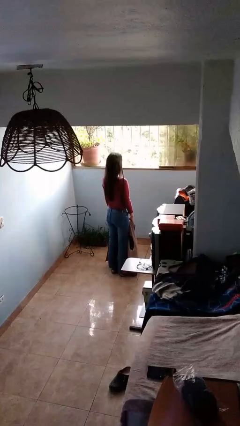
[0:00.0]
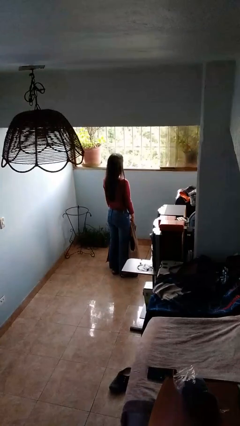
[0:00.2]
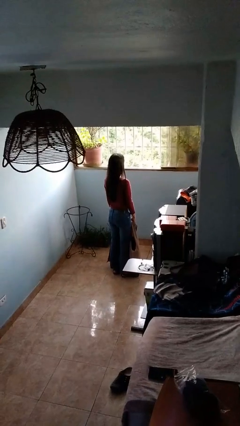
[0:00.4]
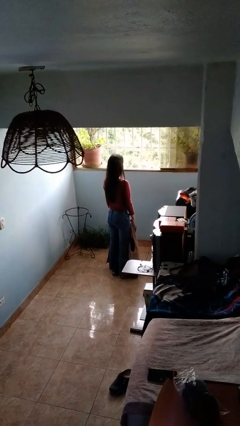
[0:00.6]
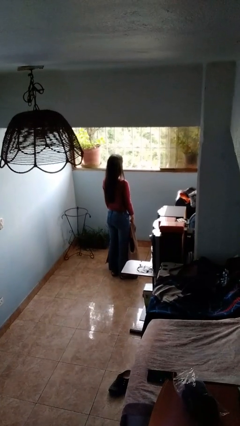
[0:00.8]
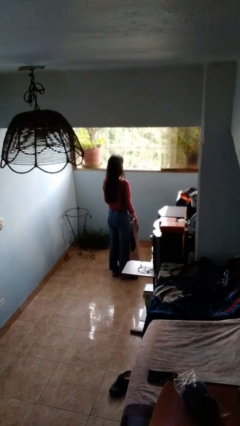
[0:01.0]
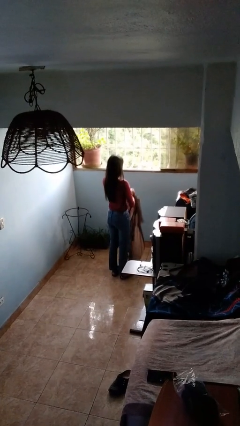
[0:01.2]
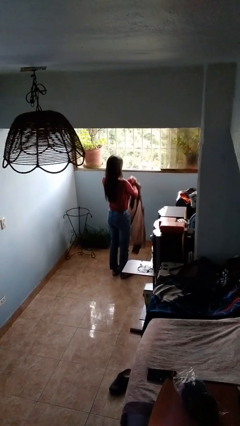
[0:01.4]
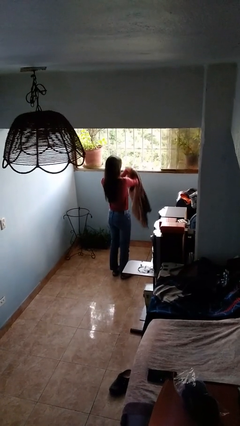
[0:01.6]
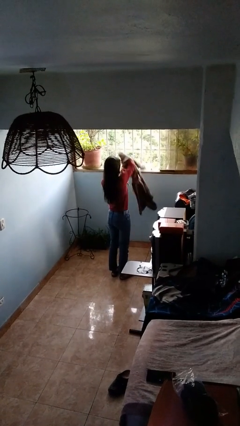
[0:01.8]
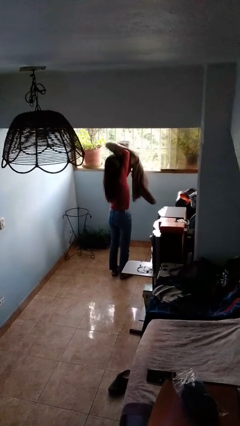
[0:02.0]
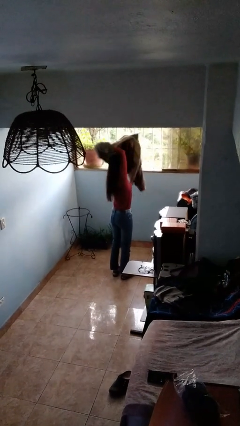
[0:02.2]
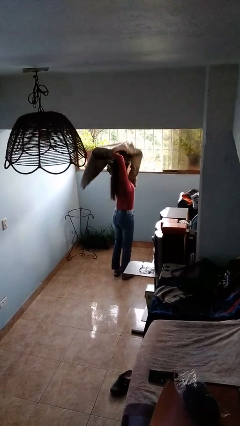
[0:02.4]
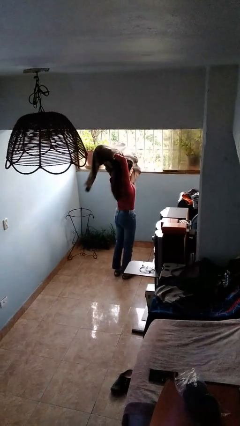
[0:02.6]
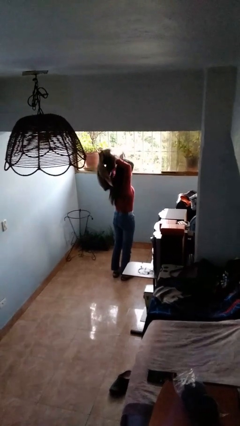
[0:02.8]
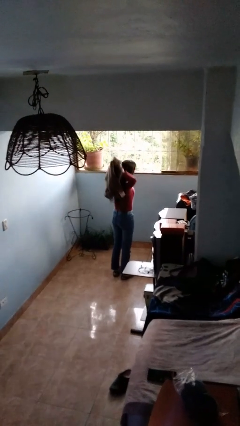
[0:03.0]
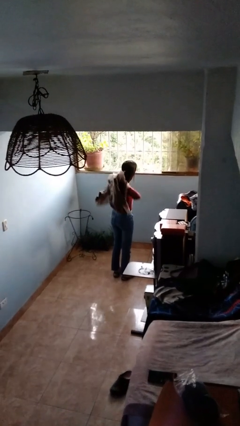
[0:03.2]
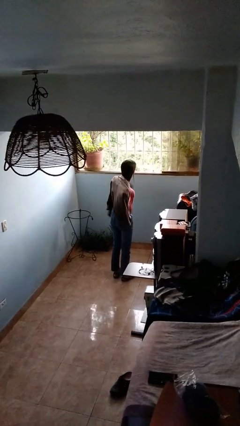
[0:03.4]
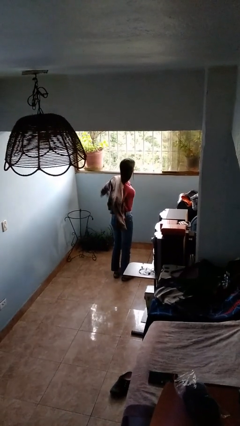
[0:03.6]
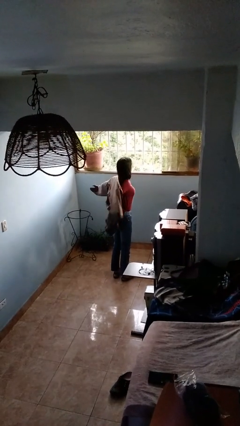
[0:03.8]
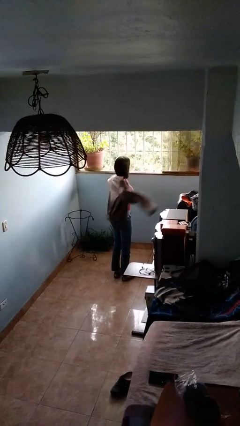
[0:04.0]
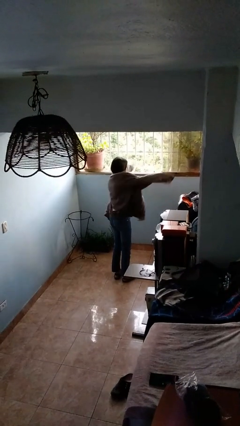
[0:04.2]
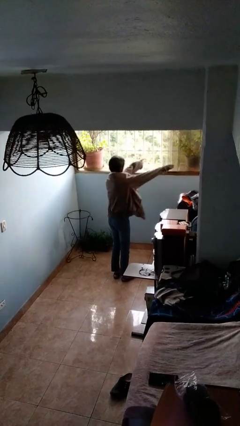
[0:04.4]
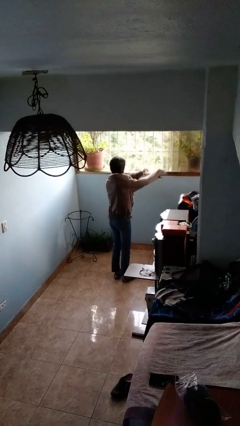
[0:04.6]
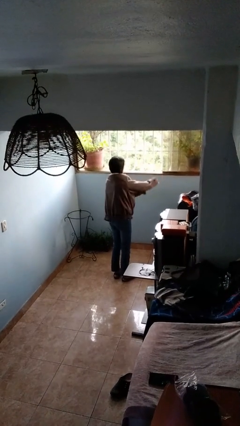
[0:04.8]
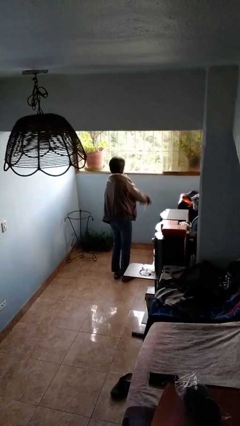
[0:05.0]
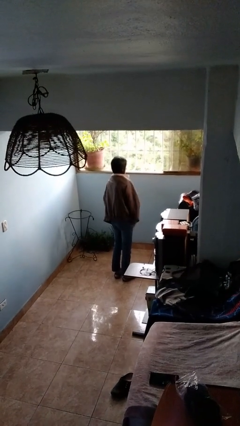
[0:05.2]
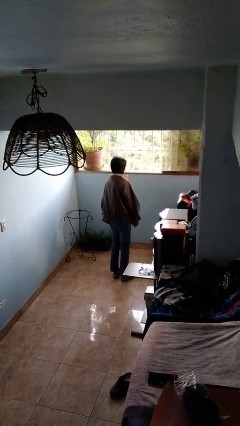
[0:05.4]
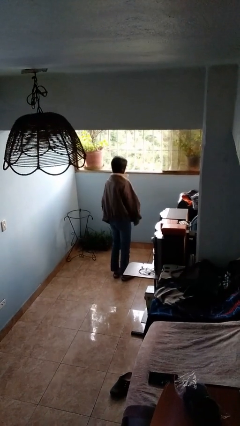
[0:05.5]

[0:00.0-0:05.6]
person puts on jacket

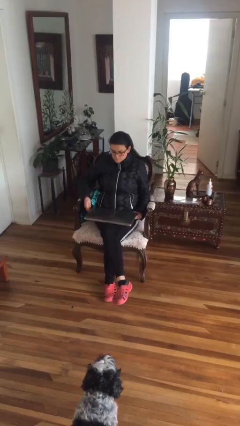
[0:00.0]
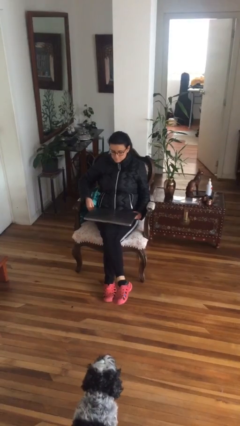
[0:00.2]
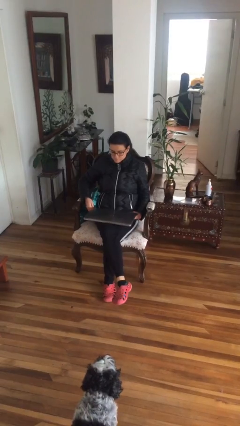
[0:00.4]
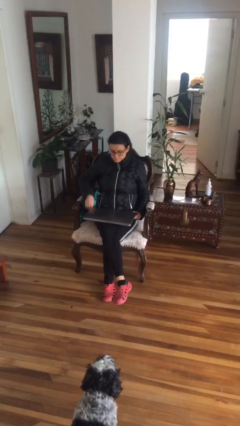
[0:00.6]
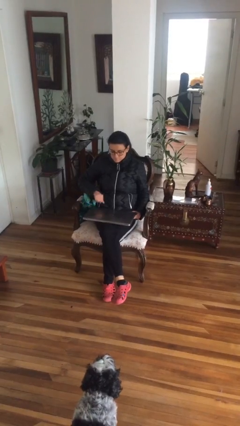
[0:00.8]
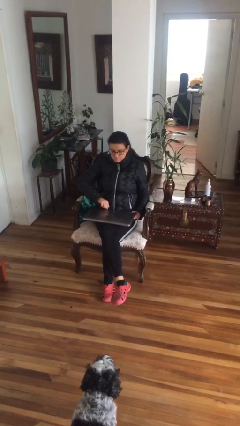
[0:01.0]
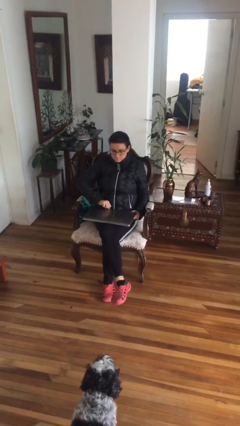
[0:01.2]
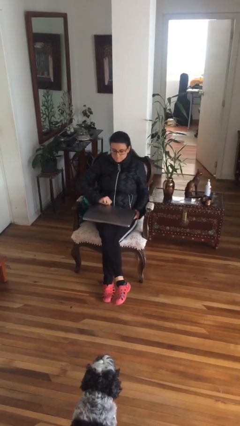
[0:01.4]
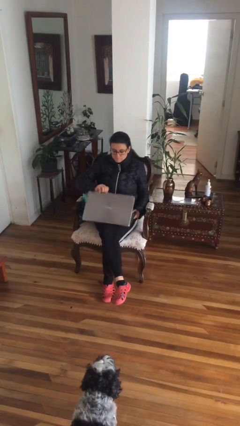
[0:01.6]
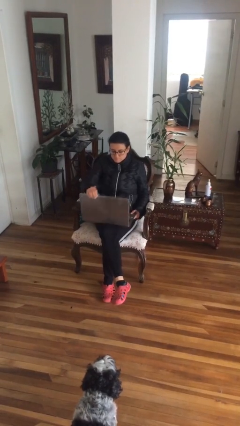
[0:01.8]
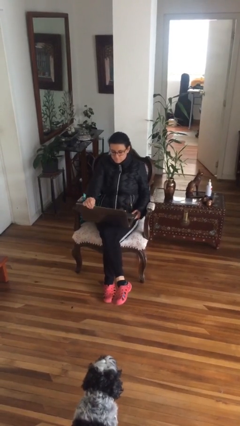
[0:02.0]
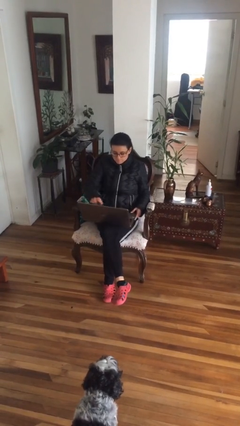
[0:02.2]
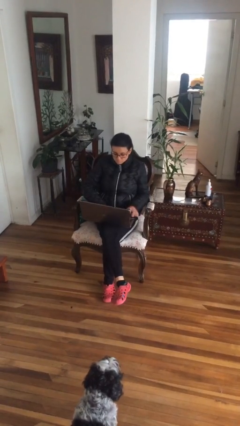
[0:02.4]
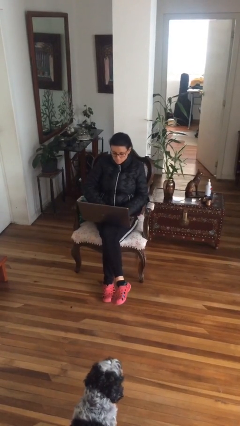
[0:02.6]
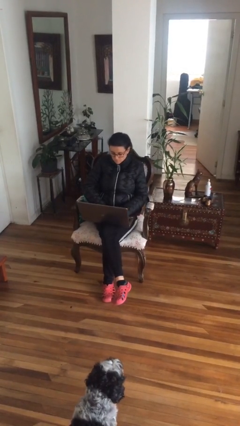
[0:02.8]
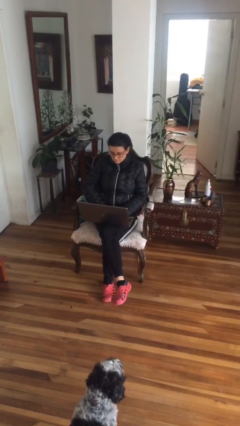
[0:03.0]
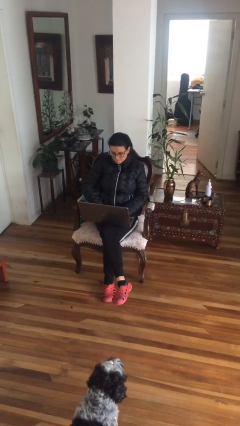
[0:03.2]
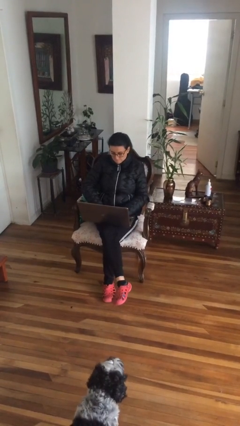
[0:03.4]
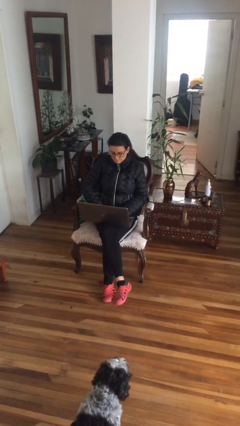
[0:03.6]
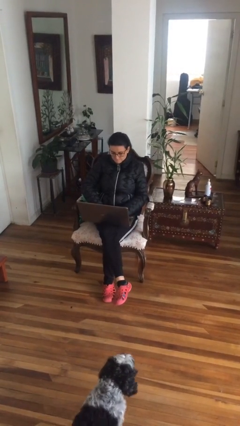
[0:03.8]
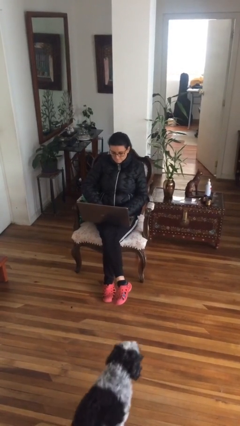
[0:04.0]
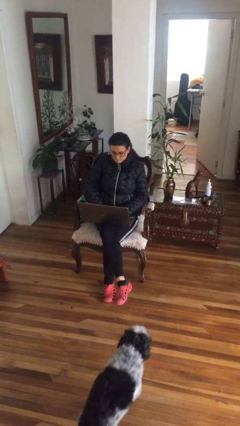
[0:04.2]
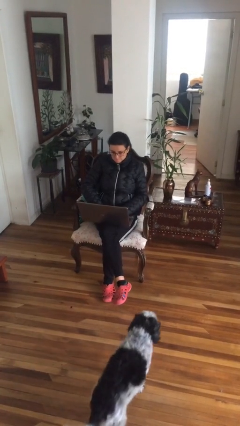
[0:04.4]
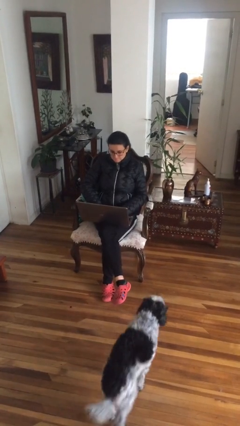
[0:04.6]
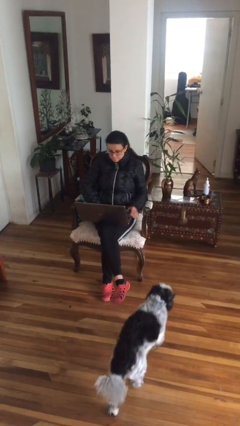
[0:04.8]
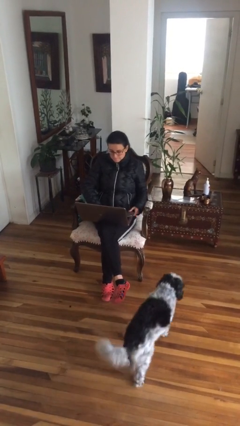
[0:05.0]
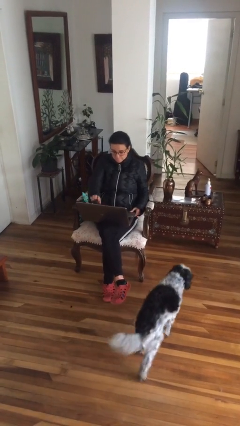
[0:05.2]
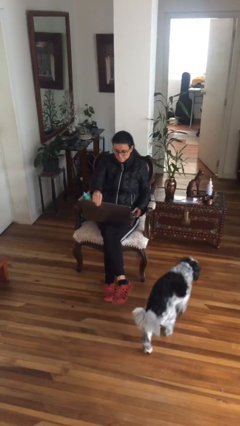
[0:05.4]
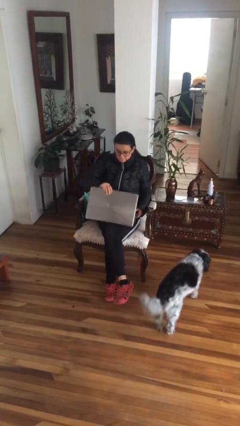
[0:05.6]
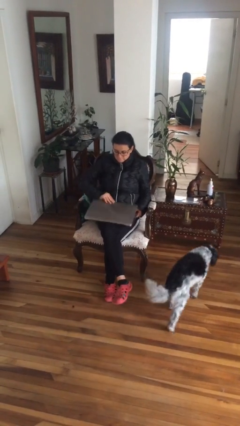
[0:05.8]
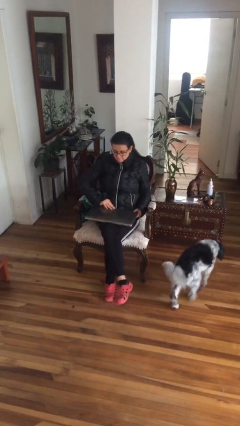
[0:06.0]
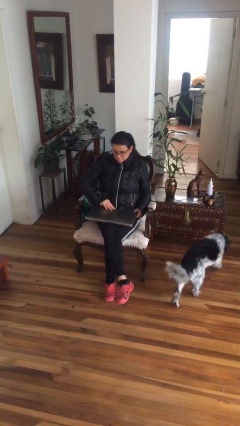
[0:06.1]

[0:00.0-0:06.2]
person interacts with laptop

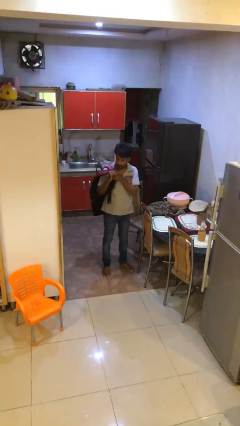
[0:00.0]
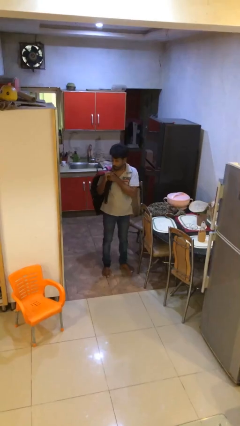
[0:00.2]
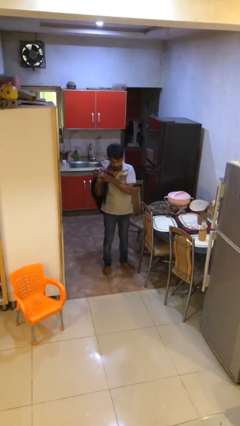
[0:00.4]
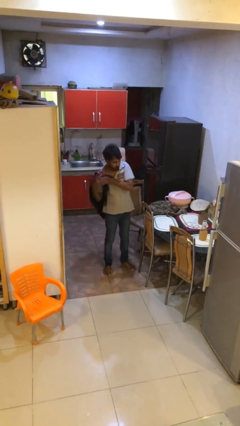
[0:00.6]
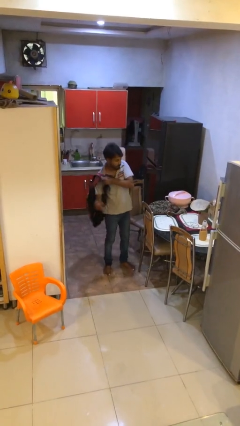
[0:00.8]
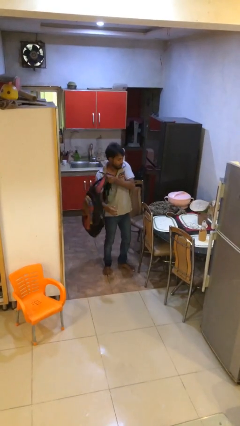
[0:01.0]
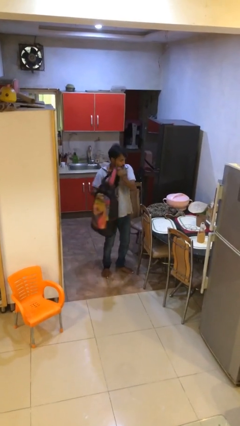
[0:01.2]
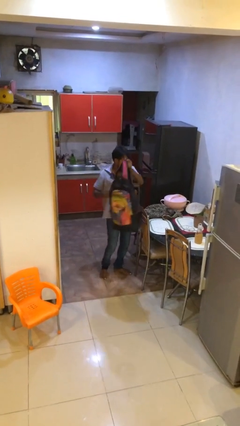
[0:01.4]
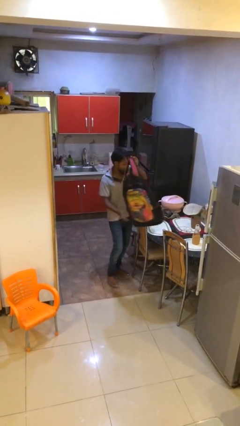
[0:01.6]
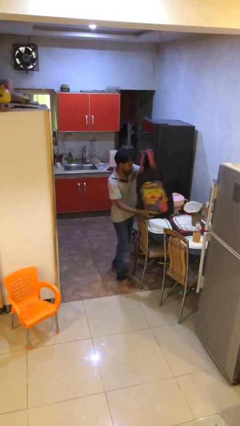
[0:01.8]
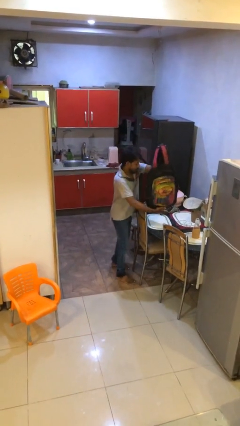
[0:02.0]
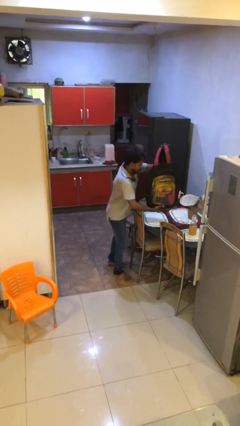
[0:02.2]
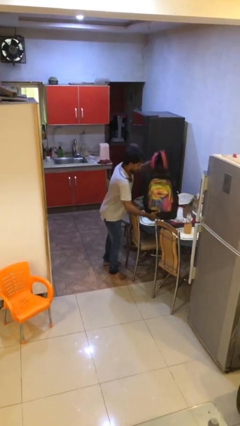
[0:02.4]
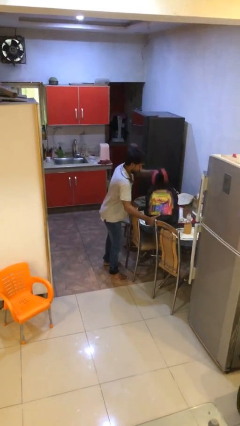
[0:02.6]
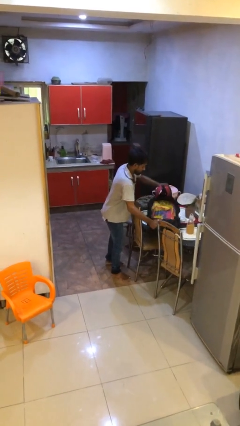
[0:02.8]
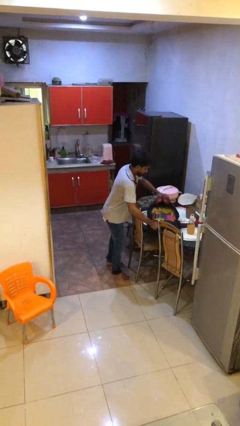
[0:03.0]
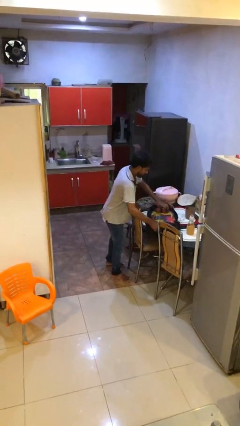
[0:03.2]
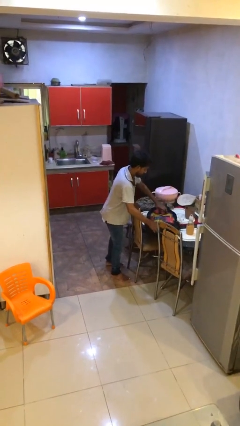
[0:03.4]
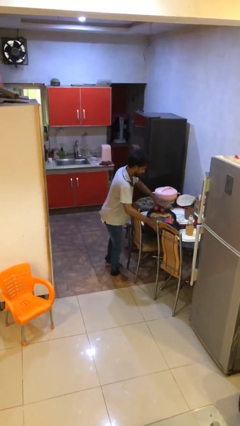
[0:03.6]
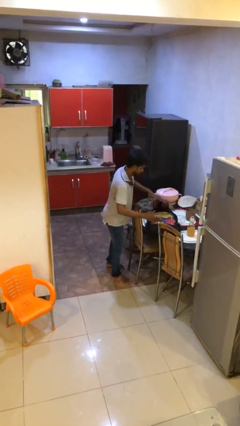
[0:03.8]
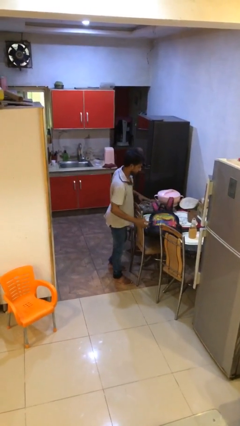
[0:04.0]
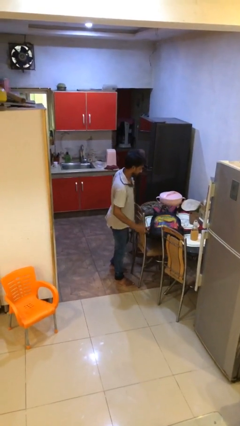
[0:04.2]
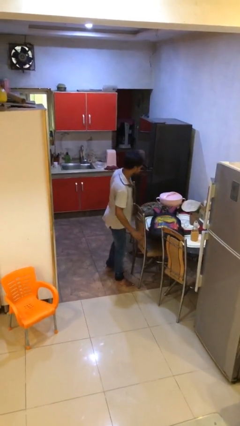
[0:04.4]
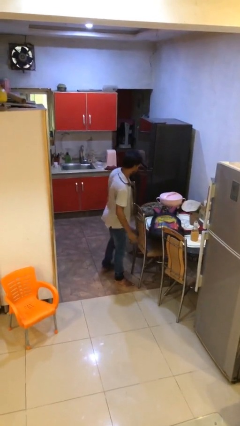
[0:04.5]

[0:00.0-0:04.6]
person puts down object on table

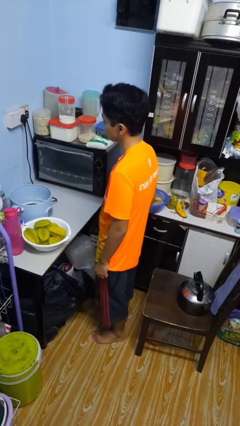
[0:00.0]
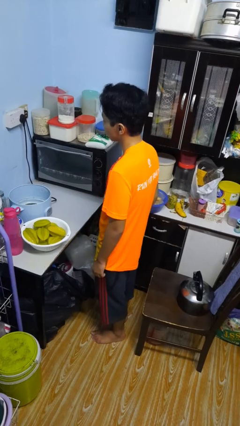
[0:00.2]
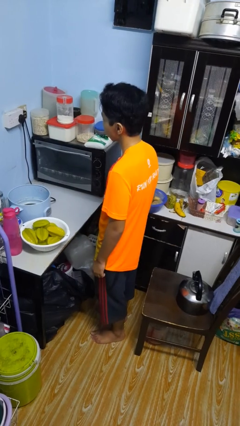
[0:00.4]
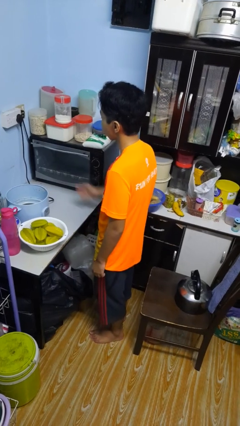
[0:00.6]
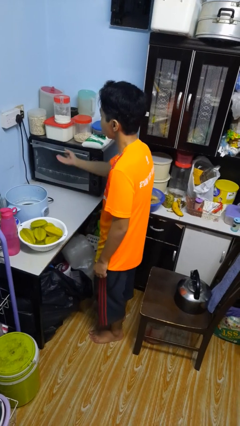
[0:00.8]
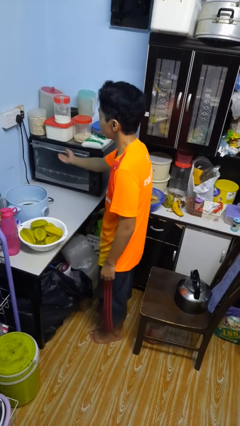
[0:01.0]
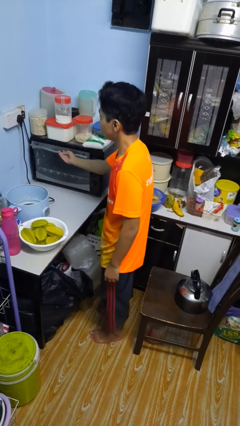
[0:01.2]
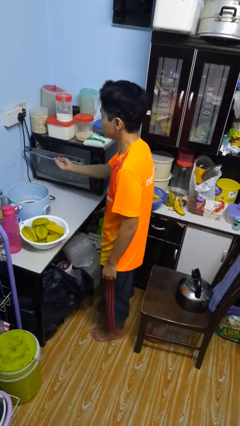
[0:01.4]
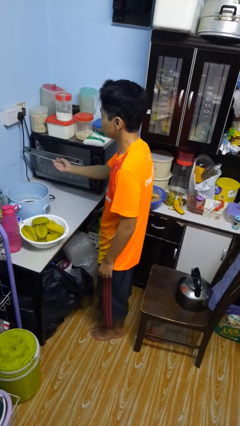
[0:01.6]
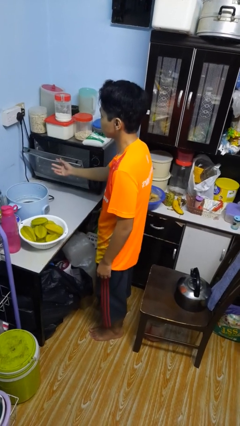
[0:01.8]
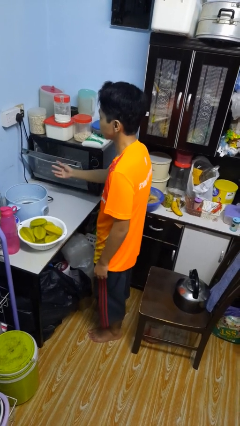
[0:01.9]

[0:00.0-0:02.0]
person opens microwave
